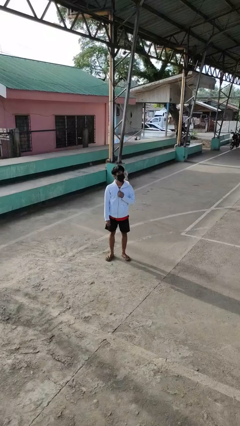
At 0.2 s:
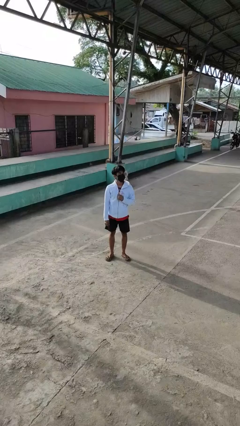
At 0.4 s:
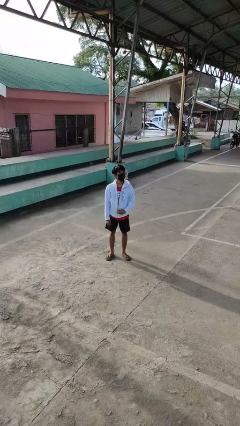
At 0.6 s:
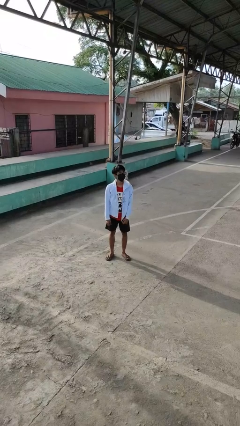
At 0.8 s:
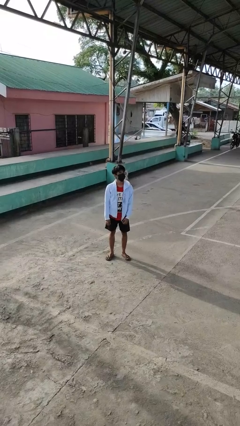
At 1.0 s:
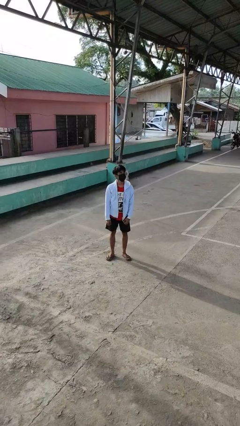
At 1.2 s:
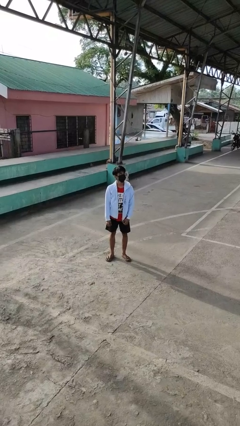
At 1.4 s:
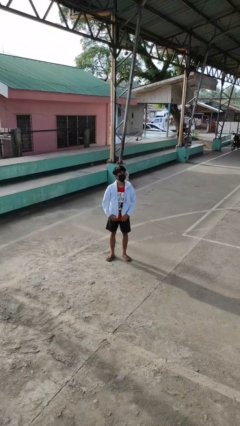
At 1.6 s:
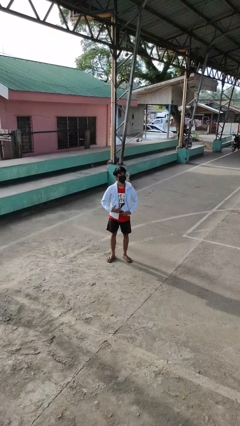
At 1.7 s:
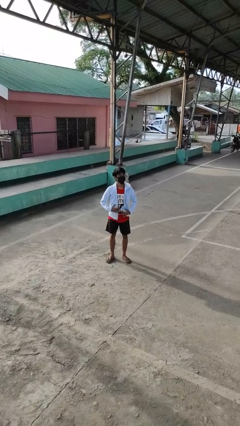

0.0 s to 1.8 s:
person unzips jacket

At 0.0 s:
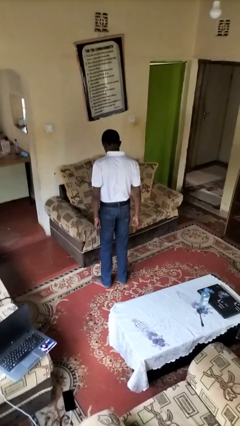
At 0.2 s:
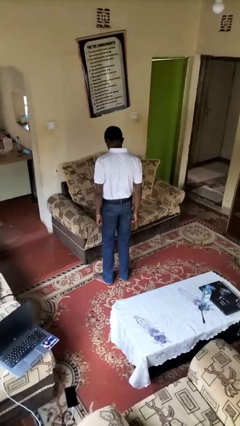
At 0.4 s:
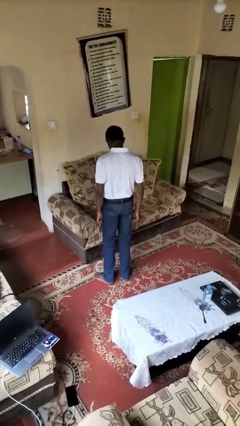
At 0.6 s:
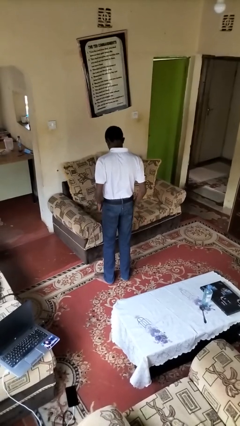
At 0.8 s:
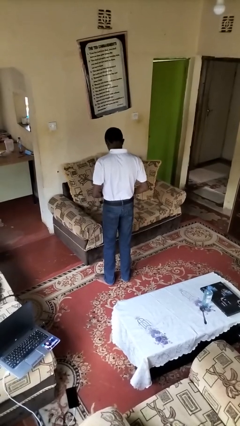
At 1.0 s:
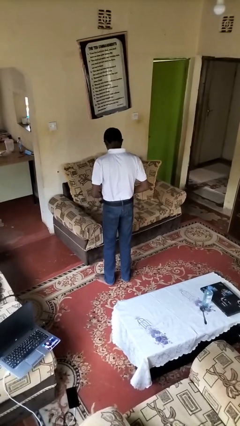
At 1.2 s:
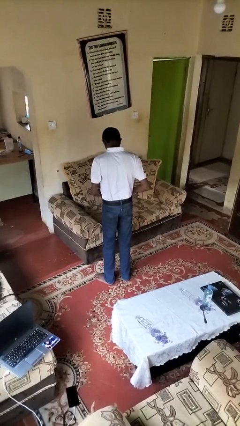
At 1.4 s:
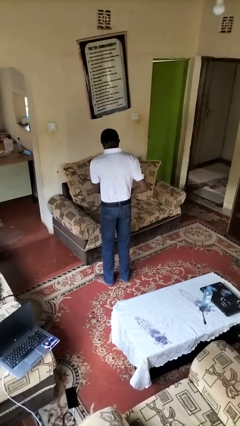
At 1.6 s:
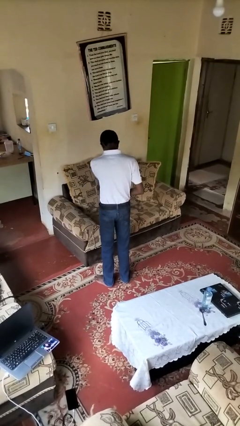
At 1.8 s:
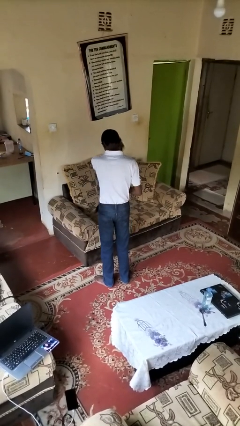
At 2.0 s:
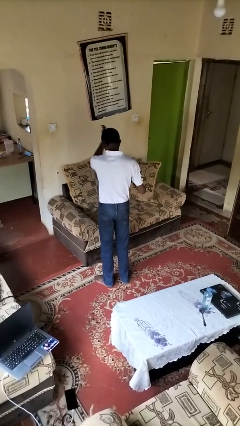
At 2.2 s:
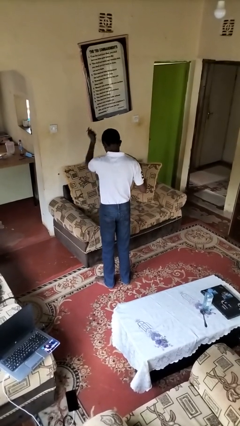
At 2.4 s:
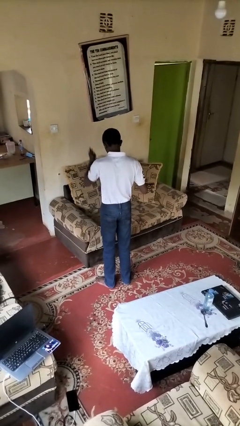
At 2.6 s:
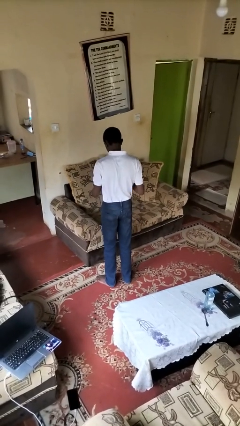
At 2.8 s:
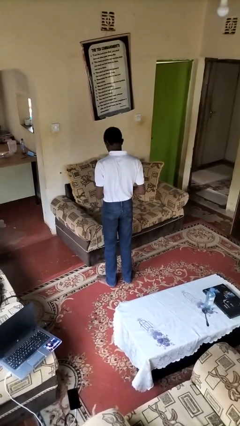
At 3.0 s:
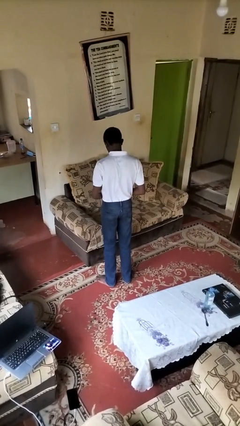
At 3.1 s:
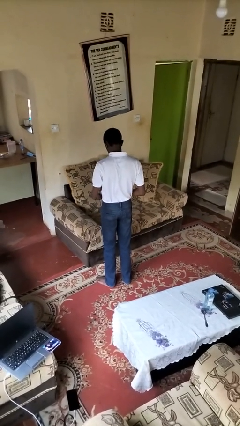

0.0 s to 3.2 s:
person takes off belt

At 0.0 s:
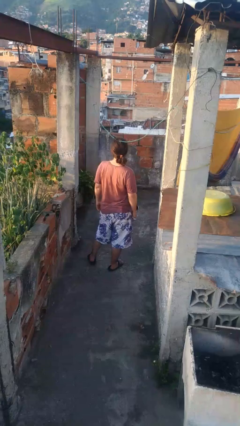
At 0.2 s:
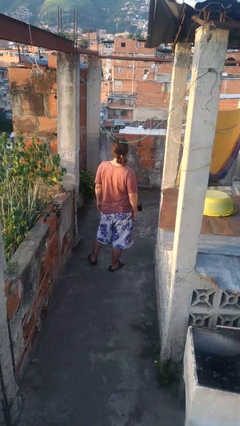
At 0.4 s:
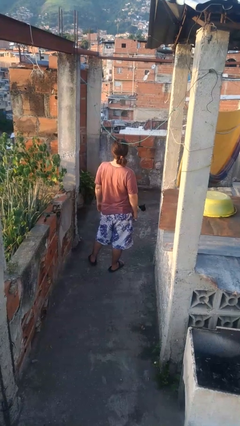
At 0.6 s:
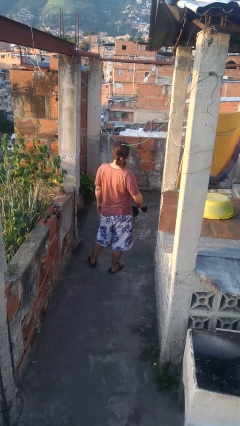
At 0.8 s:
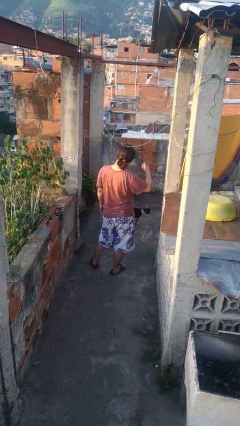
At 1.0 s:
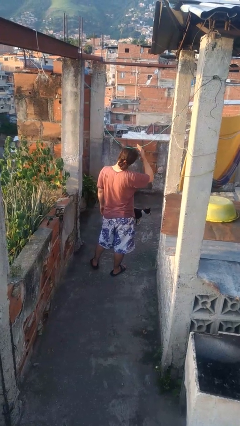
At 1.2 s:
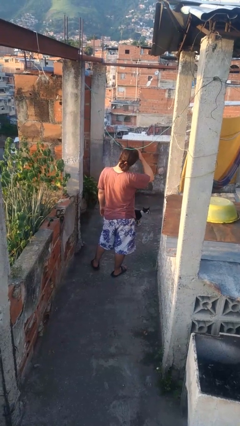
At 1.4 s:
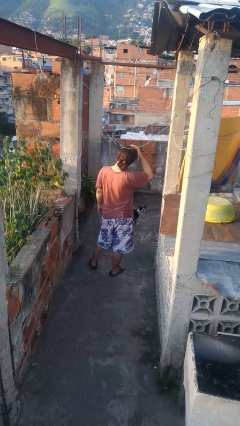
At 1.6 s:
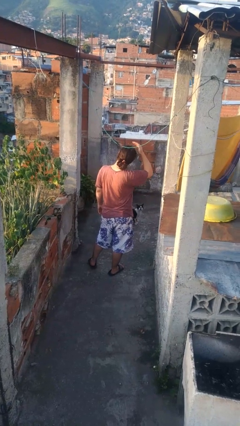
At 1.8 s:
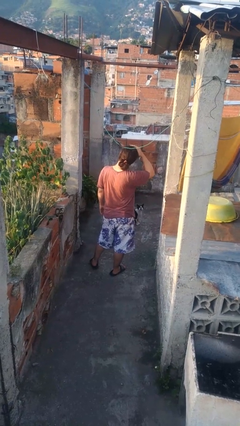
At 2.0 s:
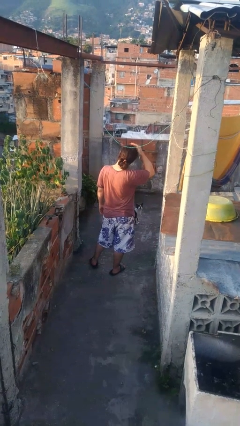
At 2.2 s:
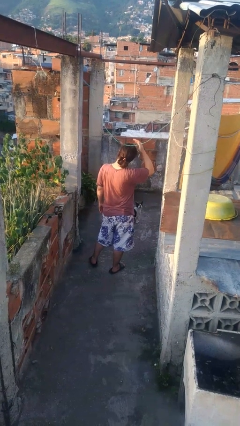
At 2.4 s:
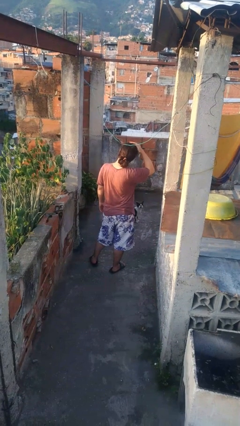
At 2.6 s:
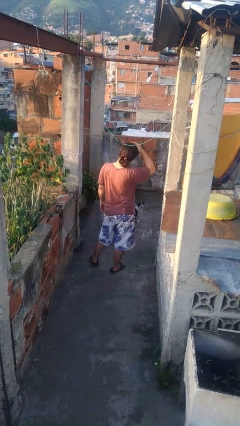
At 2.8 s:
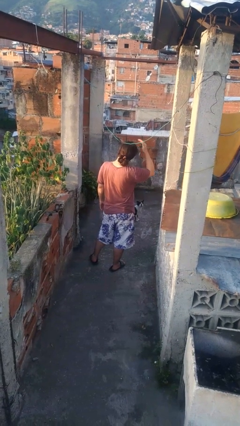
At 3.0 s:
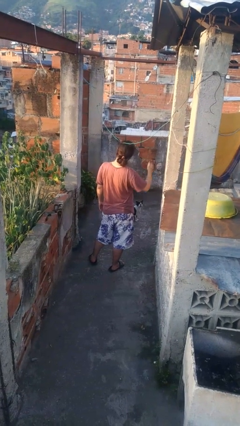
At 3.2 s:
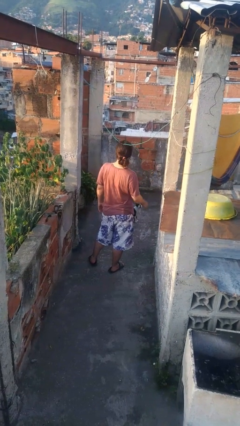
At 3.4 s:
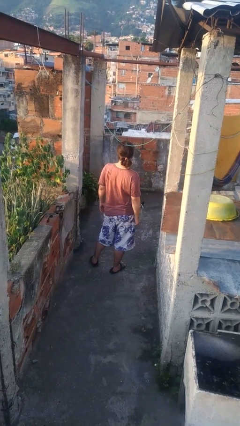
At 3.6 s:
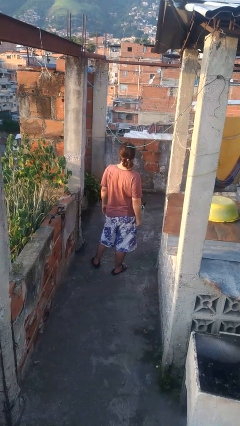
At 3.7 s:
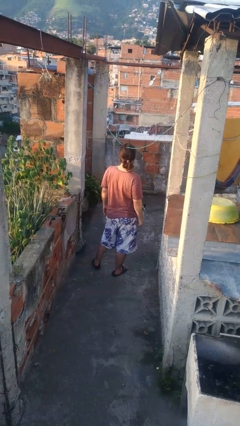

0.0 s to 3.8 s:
person pats head

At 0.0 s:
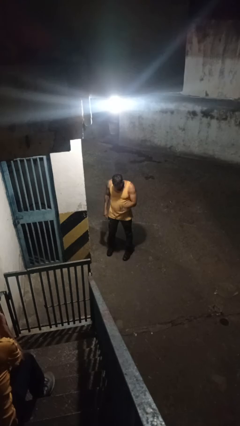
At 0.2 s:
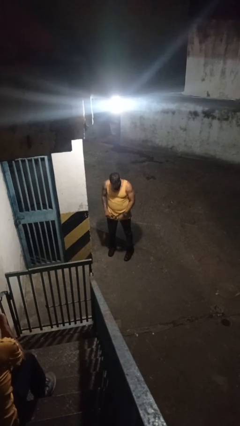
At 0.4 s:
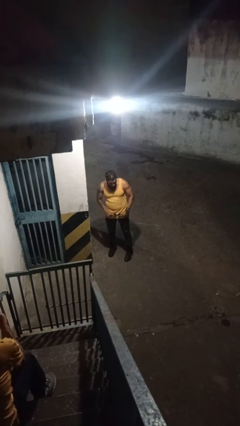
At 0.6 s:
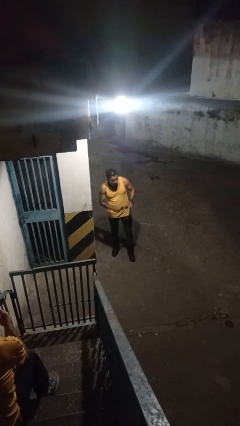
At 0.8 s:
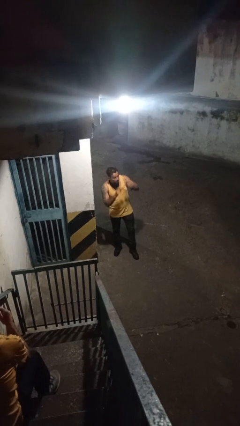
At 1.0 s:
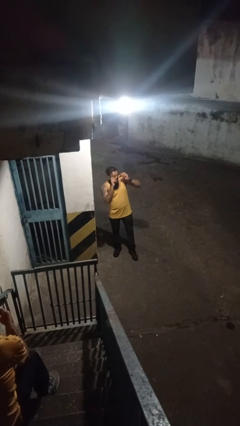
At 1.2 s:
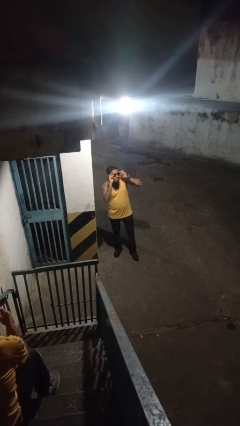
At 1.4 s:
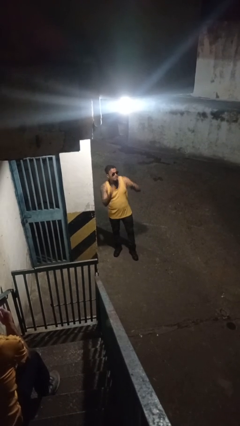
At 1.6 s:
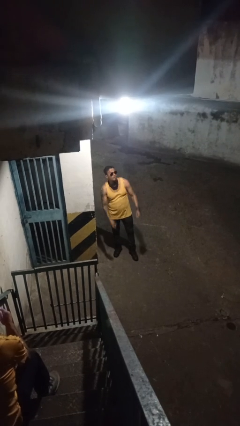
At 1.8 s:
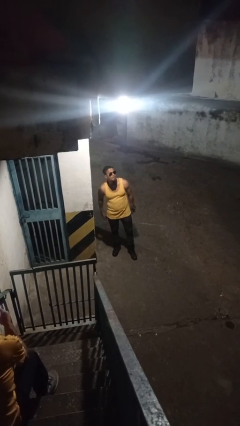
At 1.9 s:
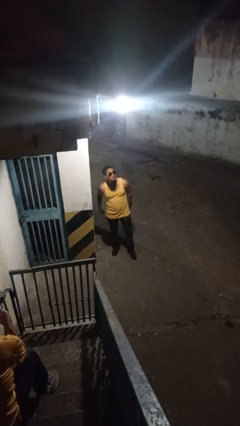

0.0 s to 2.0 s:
person puts on sunglasses

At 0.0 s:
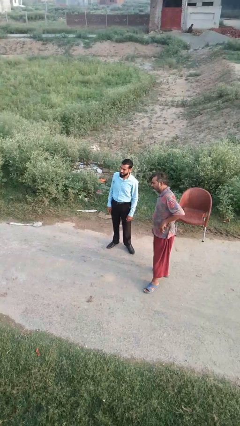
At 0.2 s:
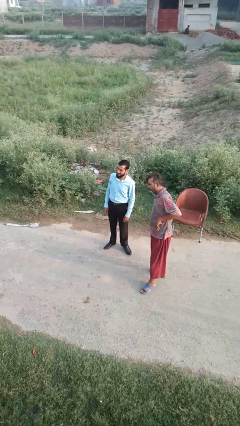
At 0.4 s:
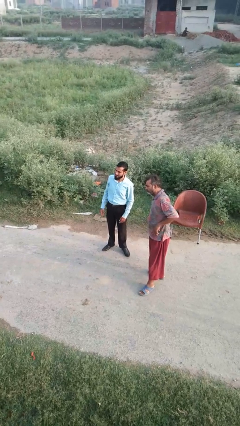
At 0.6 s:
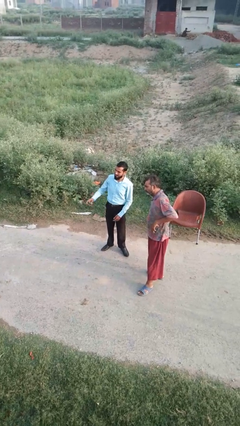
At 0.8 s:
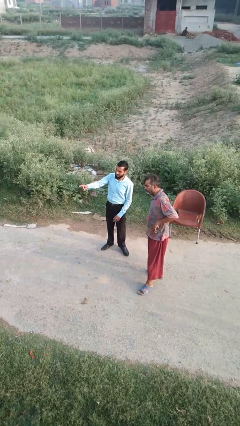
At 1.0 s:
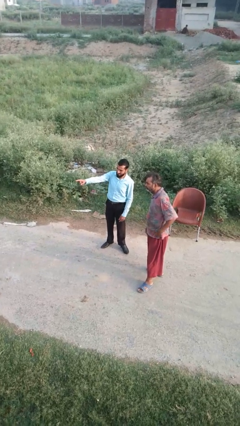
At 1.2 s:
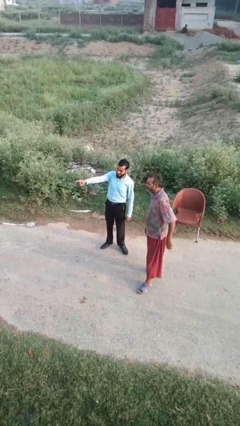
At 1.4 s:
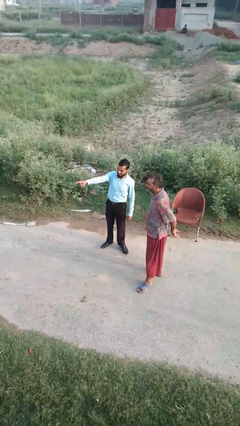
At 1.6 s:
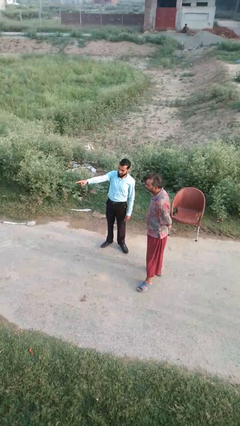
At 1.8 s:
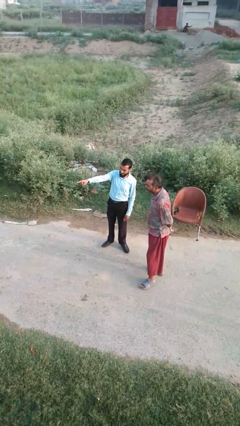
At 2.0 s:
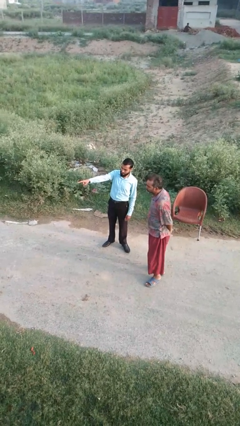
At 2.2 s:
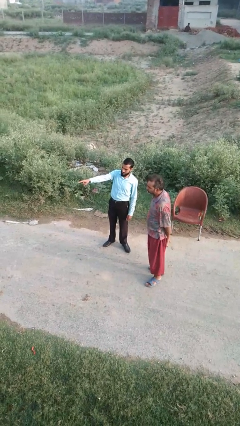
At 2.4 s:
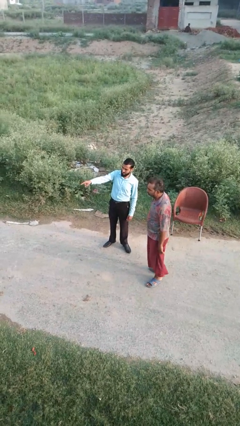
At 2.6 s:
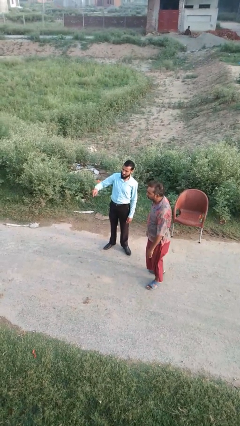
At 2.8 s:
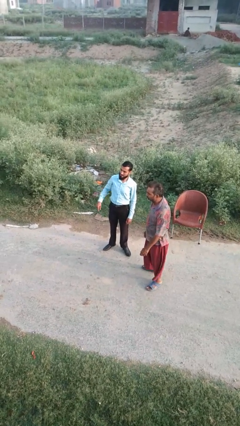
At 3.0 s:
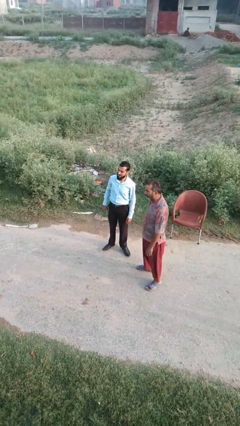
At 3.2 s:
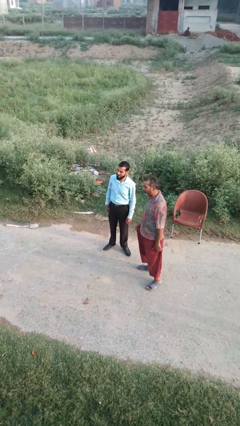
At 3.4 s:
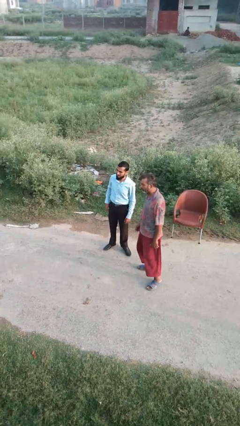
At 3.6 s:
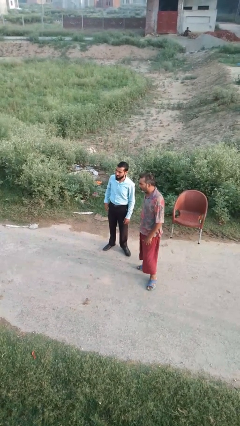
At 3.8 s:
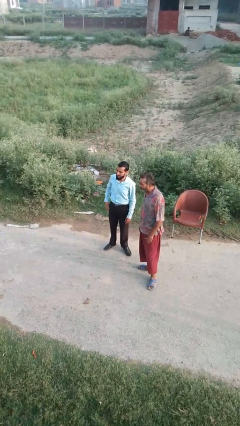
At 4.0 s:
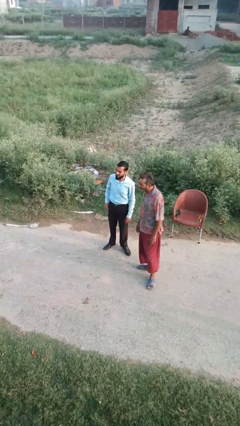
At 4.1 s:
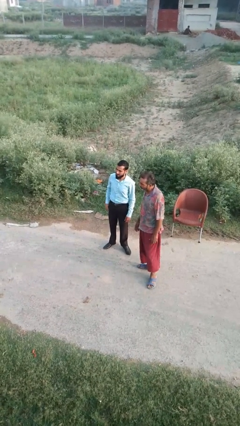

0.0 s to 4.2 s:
person points at person

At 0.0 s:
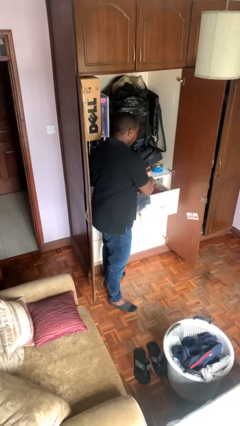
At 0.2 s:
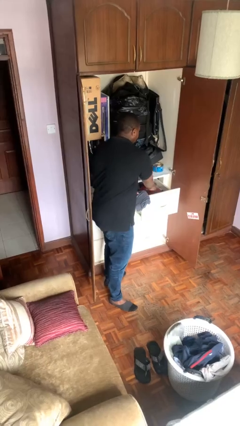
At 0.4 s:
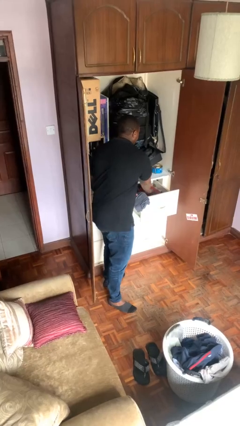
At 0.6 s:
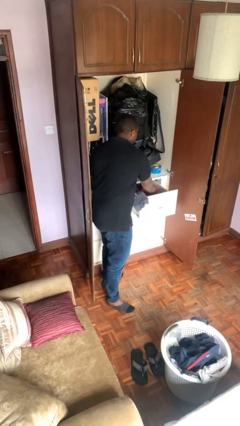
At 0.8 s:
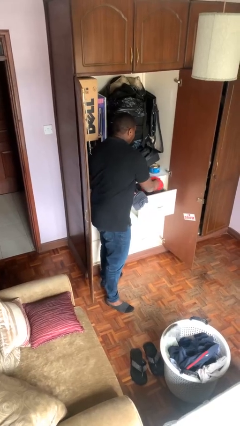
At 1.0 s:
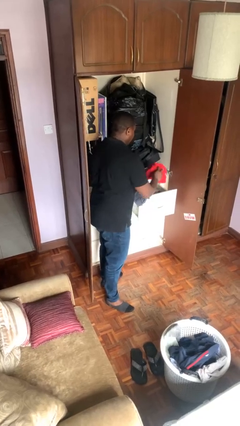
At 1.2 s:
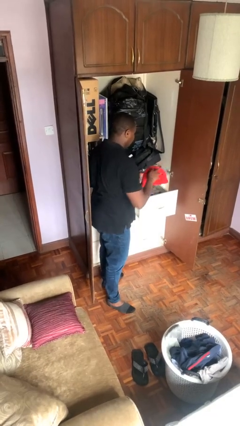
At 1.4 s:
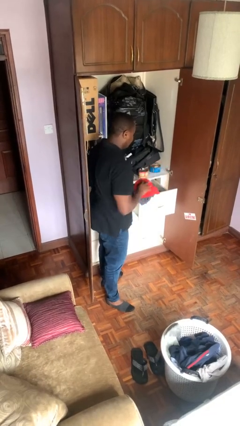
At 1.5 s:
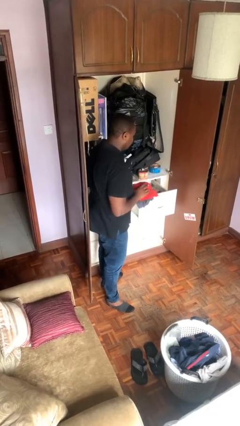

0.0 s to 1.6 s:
person takes clothes from dresser

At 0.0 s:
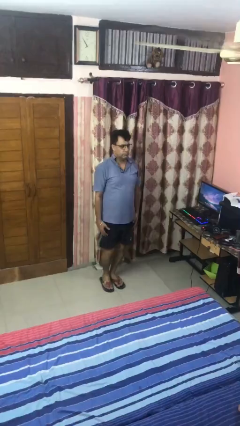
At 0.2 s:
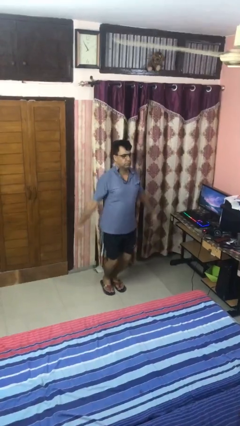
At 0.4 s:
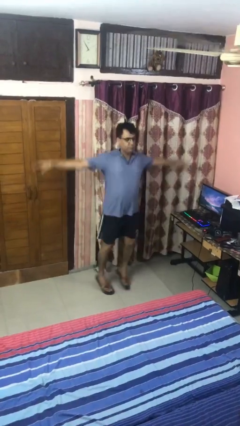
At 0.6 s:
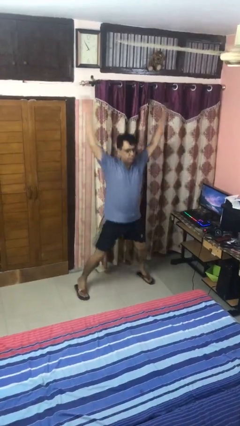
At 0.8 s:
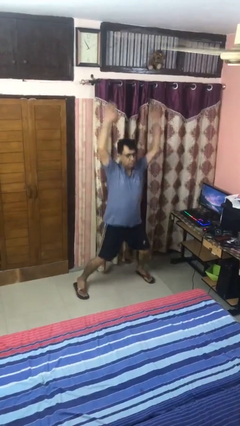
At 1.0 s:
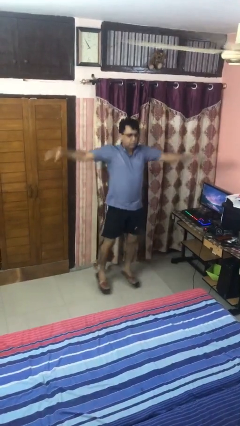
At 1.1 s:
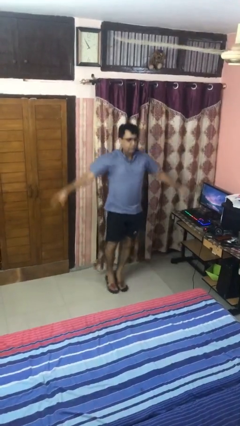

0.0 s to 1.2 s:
person exercises with jumping jacks
